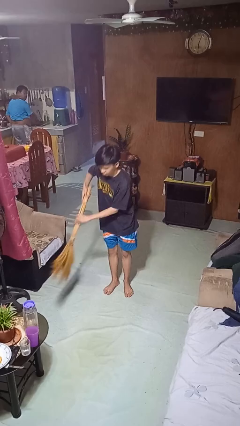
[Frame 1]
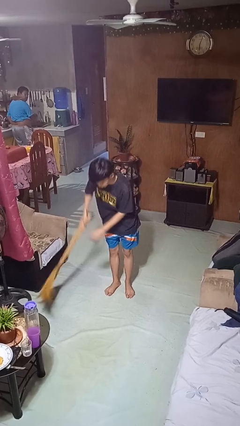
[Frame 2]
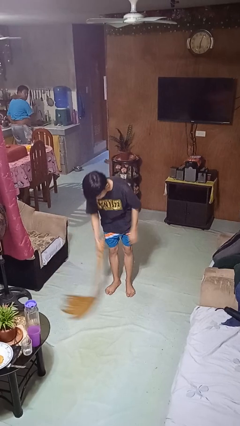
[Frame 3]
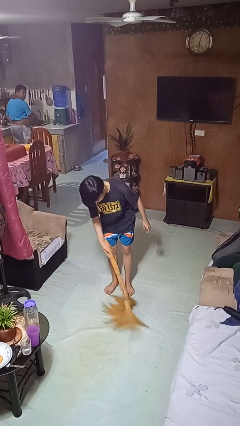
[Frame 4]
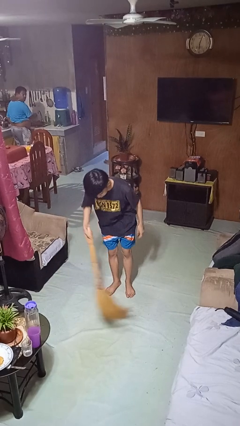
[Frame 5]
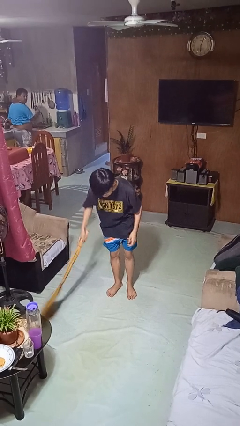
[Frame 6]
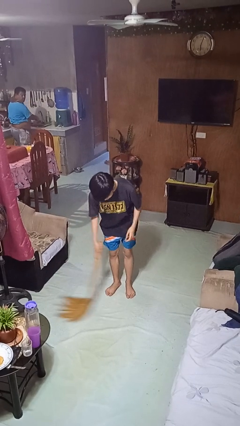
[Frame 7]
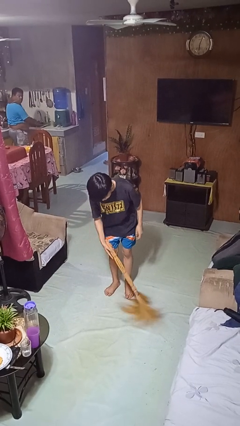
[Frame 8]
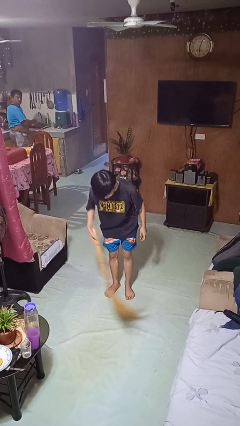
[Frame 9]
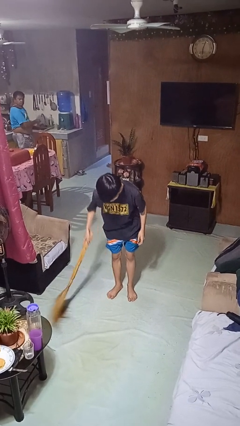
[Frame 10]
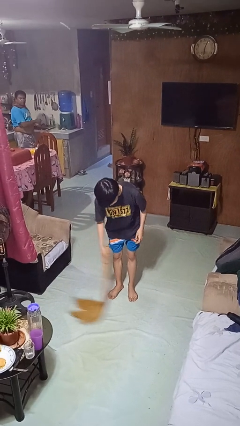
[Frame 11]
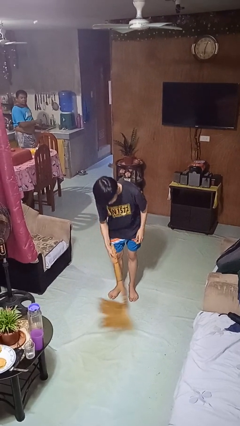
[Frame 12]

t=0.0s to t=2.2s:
person sweeps floor

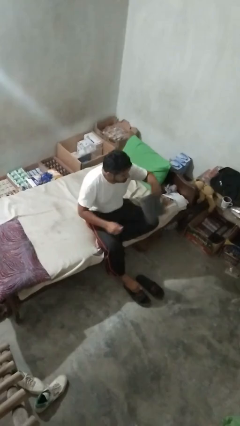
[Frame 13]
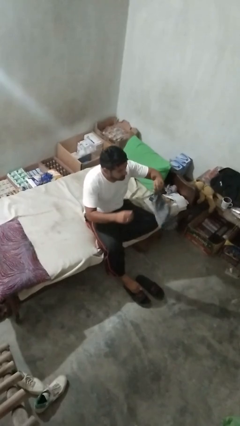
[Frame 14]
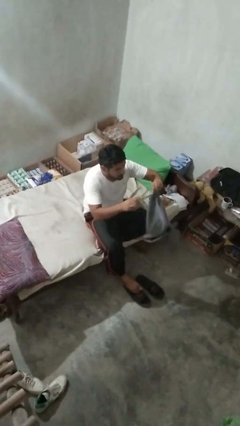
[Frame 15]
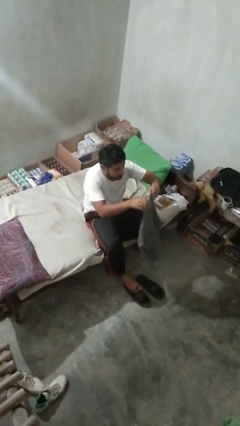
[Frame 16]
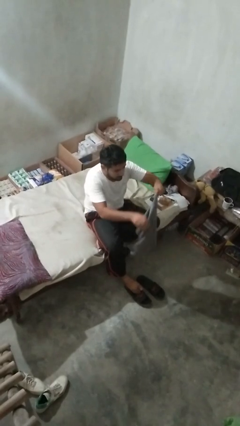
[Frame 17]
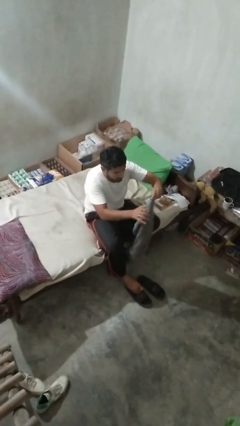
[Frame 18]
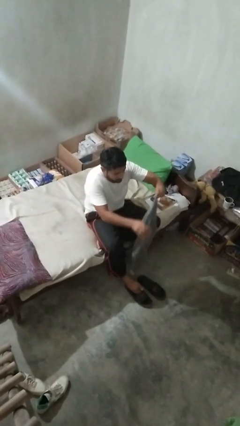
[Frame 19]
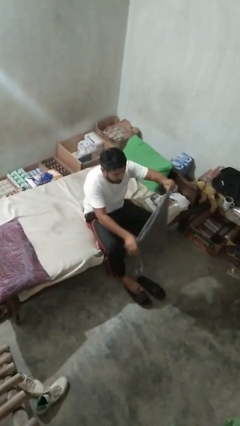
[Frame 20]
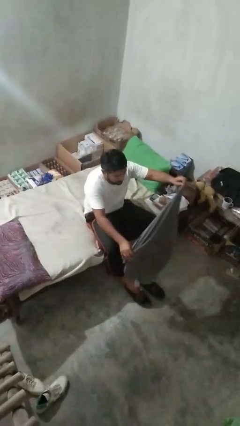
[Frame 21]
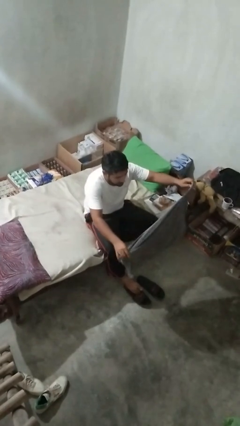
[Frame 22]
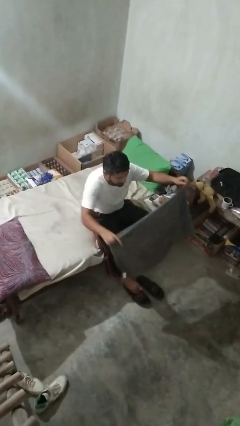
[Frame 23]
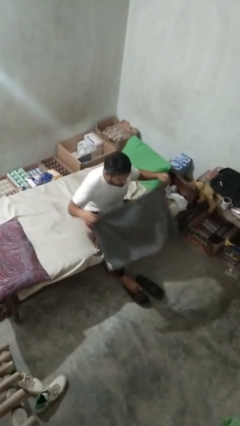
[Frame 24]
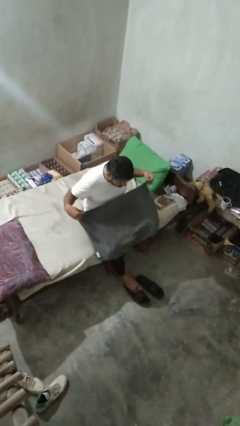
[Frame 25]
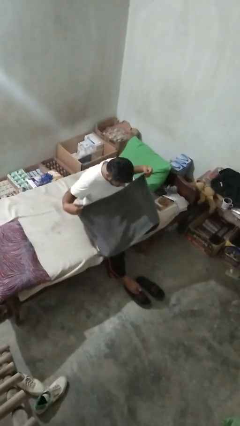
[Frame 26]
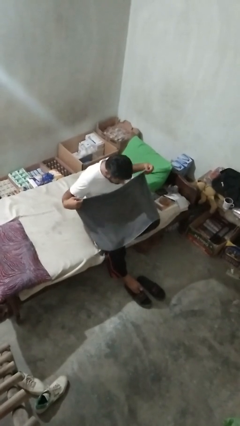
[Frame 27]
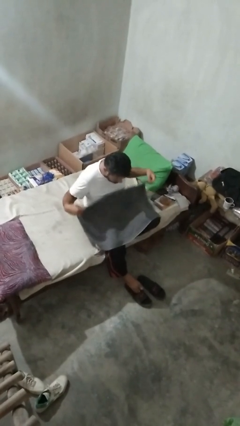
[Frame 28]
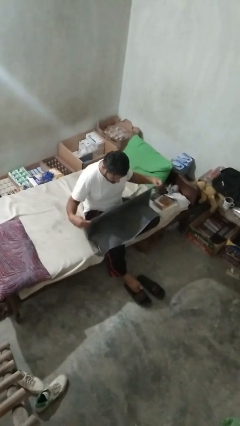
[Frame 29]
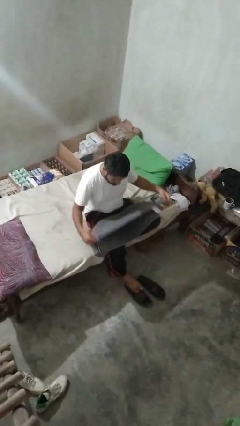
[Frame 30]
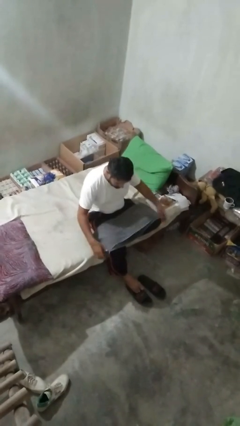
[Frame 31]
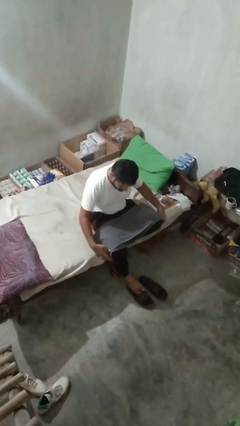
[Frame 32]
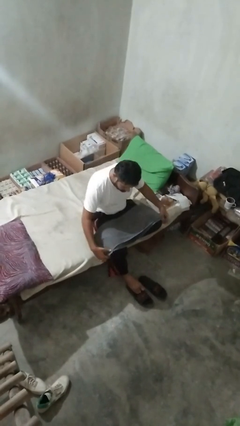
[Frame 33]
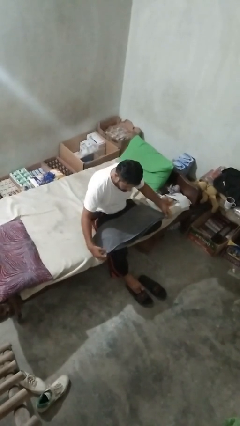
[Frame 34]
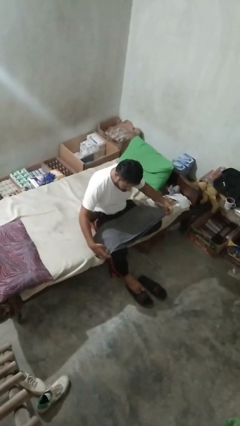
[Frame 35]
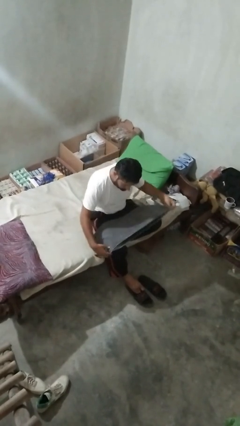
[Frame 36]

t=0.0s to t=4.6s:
person folds towel

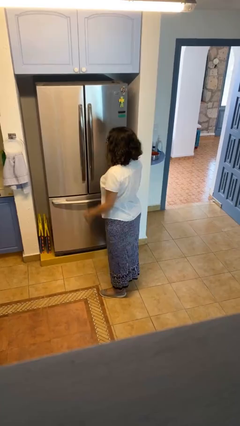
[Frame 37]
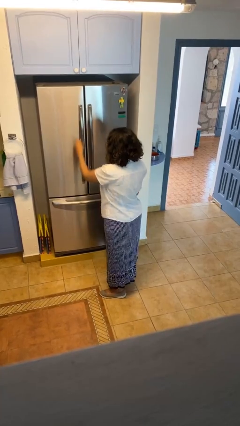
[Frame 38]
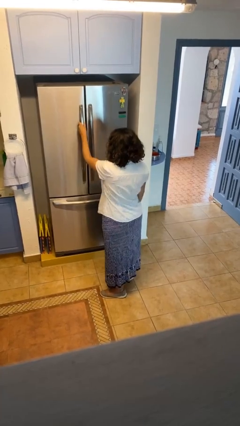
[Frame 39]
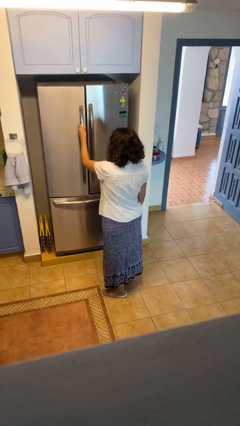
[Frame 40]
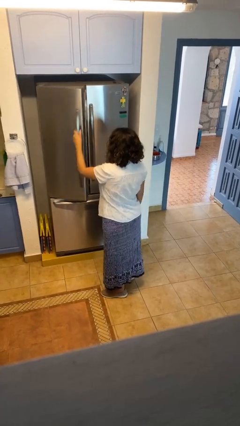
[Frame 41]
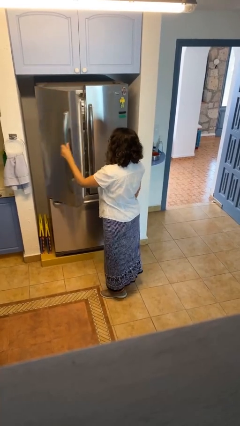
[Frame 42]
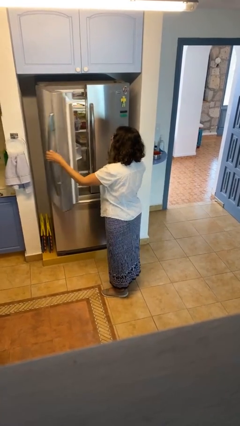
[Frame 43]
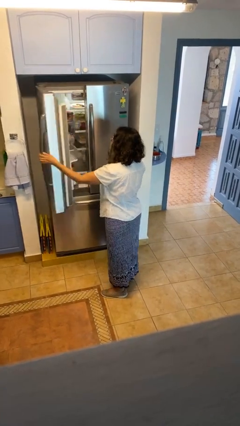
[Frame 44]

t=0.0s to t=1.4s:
person opens refrigerator

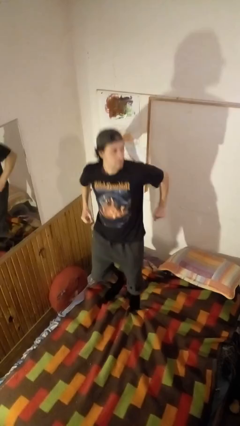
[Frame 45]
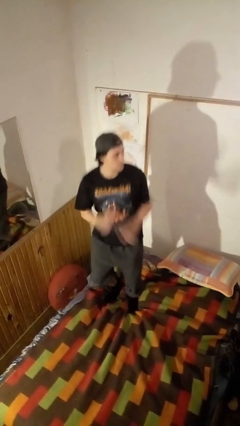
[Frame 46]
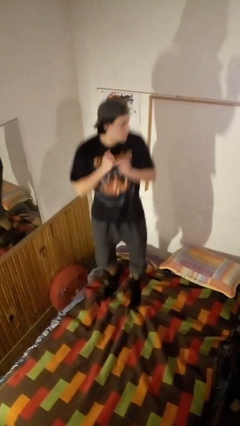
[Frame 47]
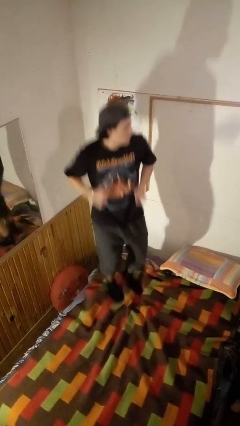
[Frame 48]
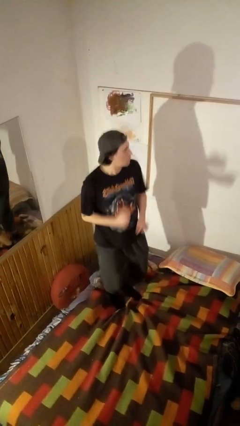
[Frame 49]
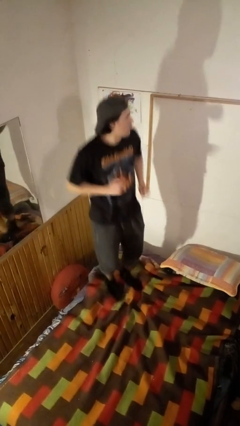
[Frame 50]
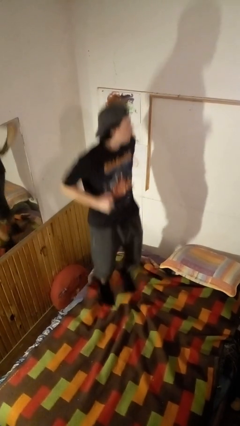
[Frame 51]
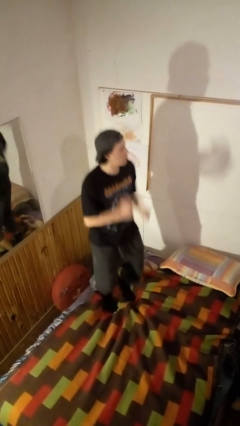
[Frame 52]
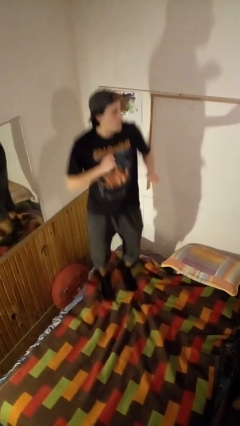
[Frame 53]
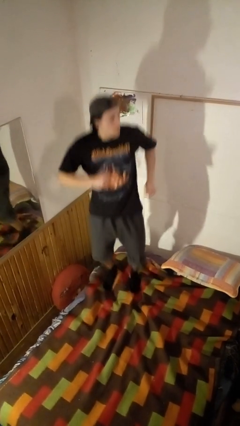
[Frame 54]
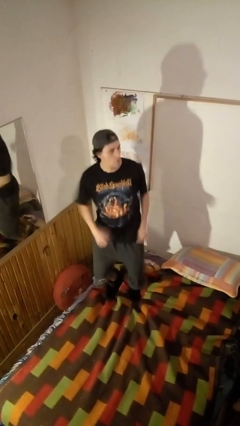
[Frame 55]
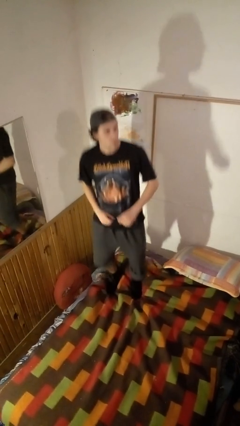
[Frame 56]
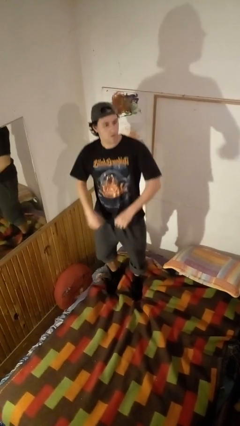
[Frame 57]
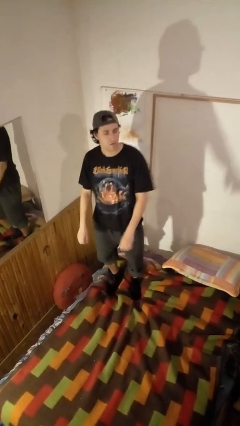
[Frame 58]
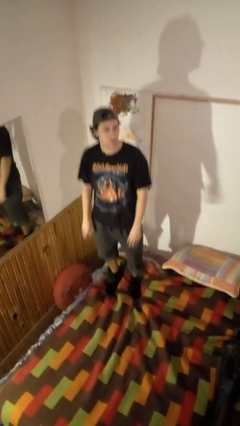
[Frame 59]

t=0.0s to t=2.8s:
person jumps on bed

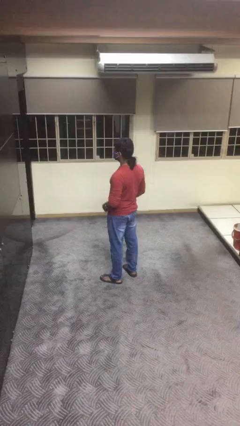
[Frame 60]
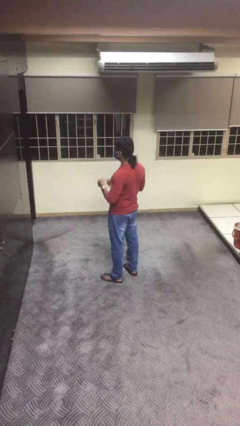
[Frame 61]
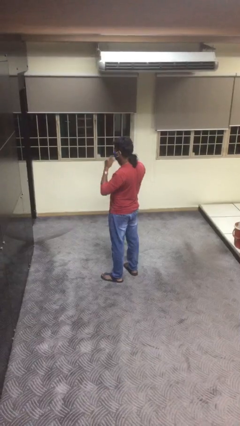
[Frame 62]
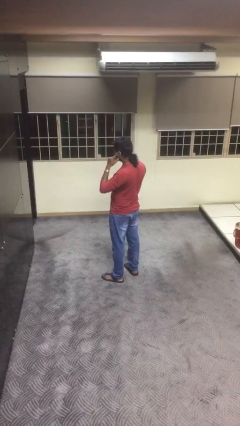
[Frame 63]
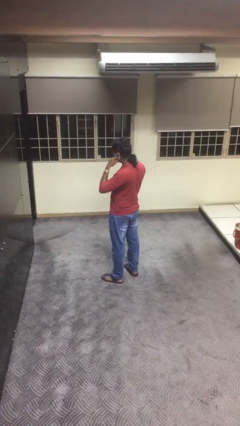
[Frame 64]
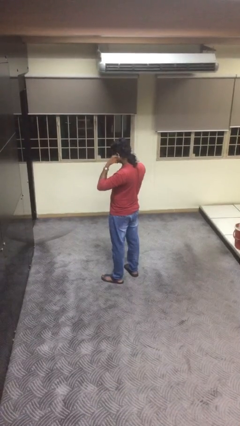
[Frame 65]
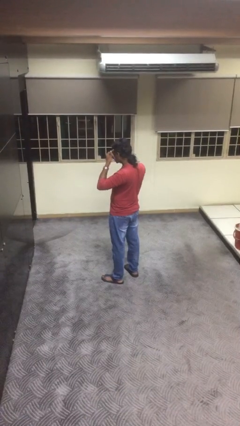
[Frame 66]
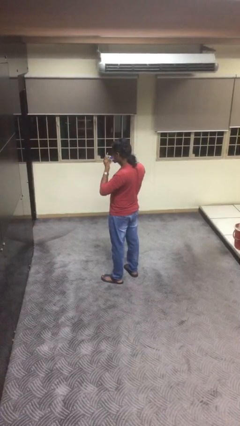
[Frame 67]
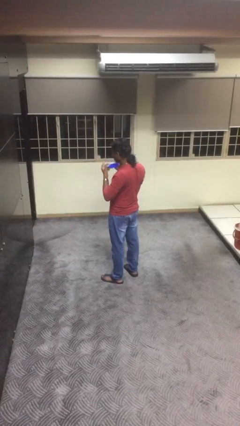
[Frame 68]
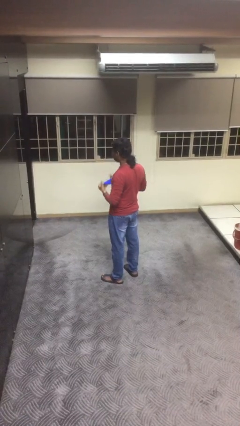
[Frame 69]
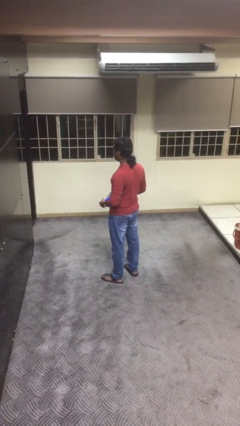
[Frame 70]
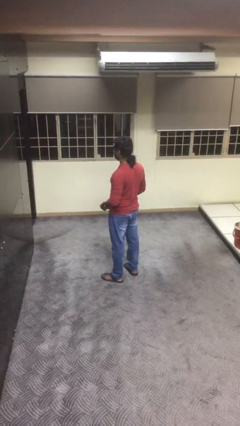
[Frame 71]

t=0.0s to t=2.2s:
person takes off facemask

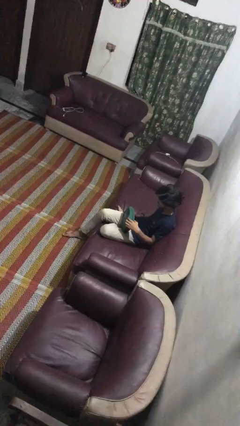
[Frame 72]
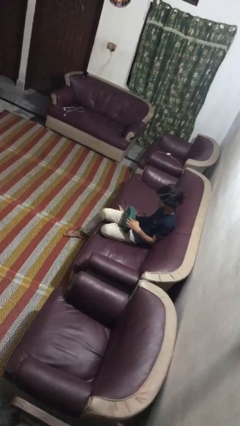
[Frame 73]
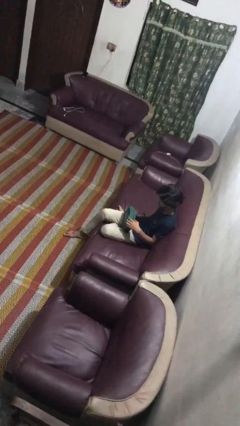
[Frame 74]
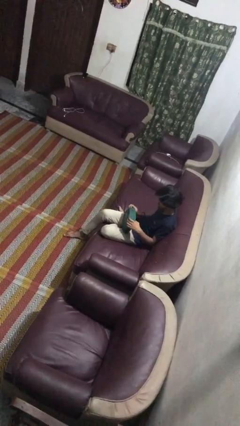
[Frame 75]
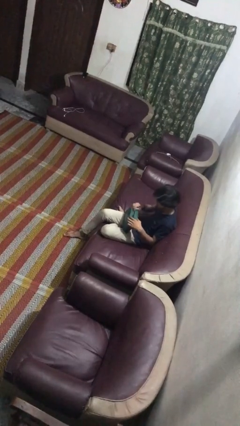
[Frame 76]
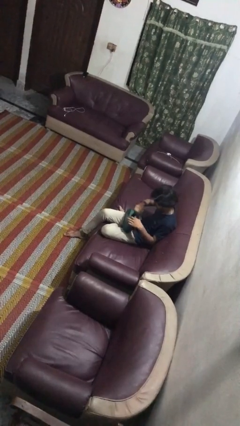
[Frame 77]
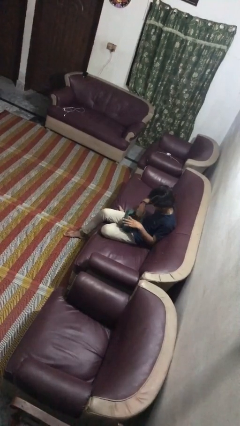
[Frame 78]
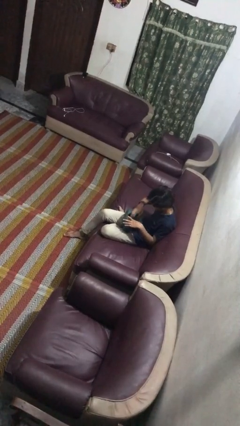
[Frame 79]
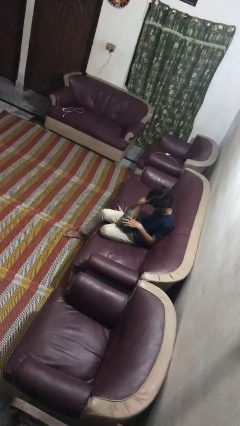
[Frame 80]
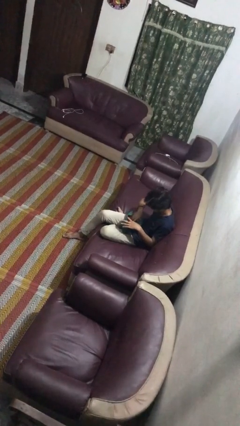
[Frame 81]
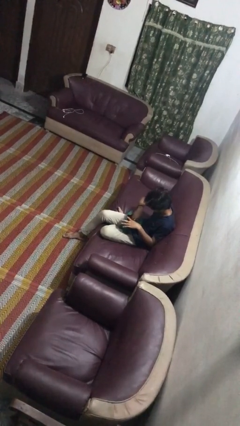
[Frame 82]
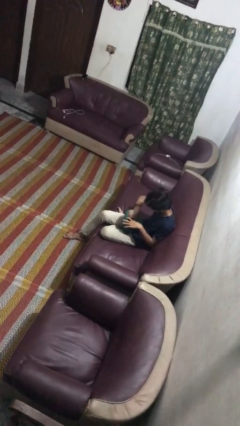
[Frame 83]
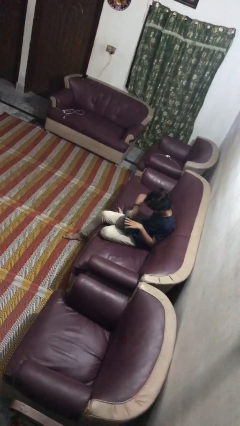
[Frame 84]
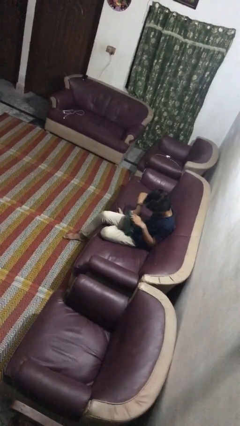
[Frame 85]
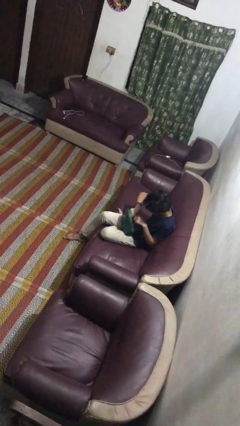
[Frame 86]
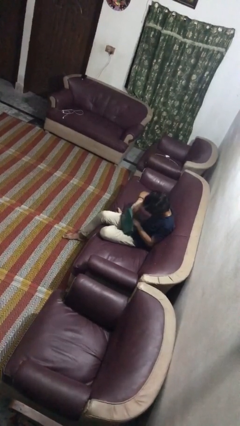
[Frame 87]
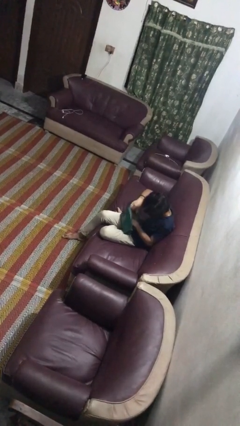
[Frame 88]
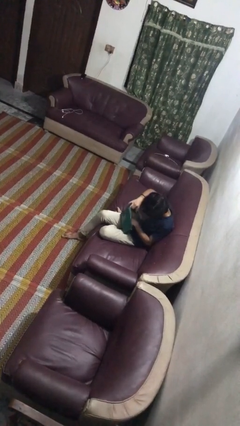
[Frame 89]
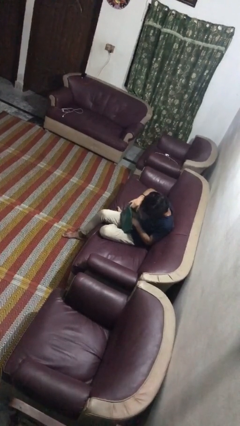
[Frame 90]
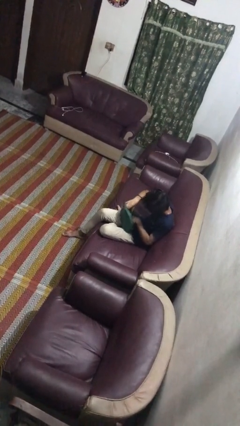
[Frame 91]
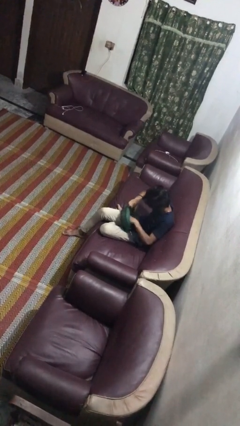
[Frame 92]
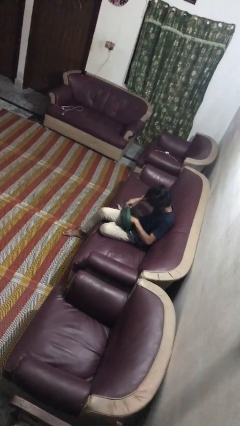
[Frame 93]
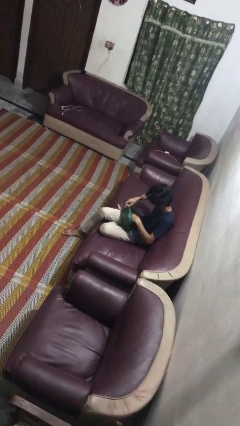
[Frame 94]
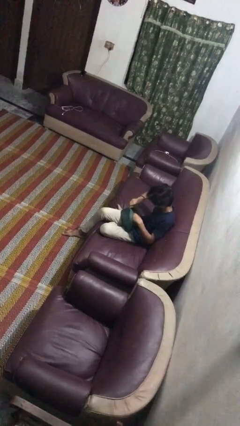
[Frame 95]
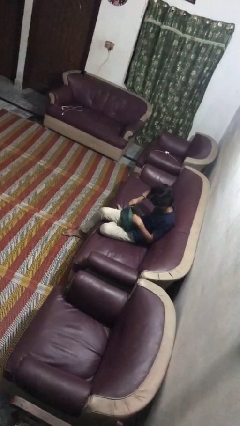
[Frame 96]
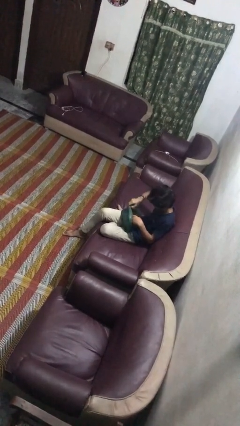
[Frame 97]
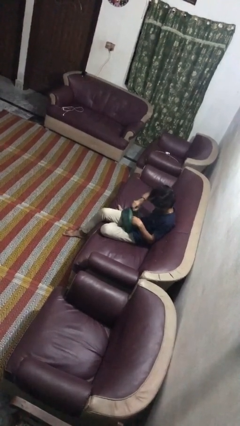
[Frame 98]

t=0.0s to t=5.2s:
person searches in purse
